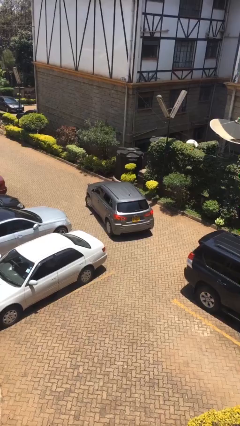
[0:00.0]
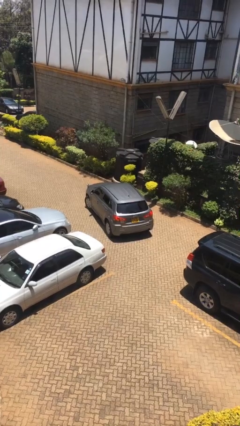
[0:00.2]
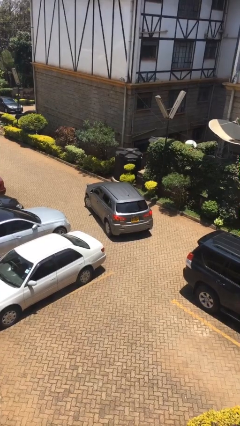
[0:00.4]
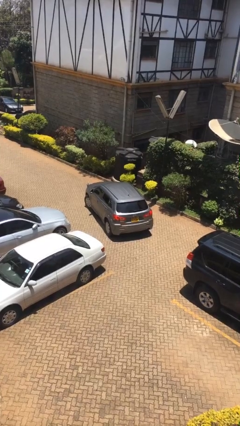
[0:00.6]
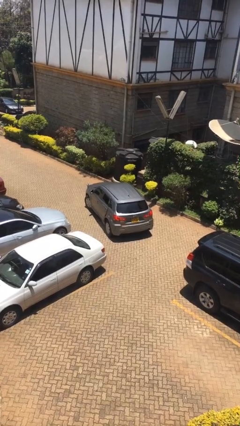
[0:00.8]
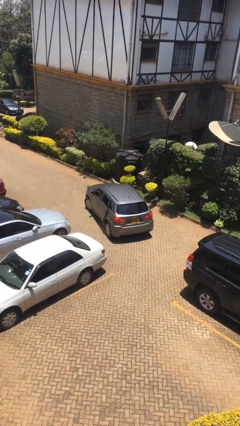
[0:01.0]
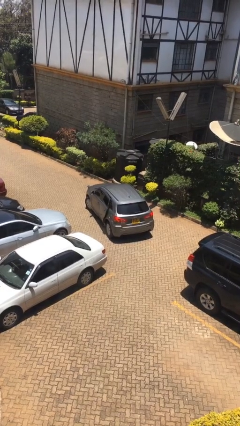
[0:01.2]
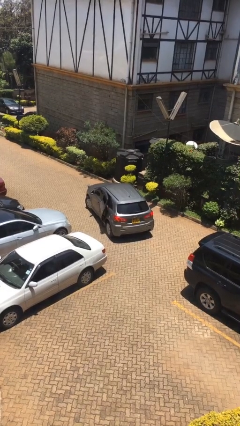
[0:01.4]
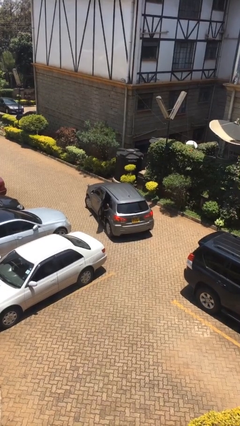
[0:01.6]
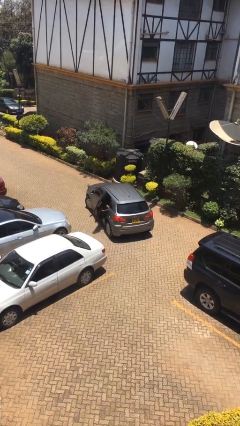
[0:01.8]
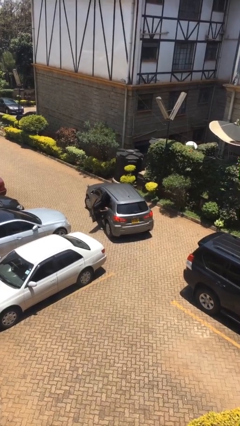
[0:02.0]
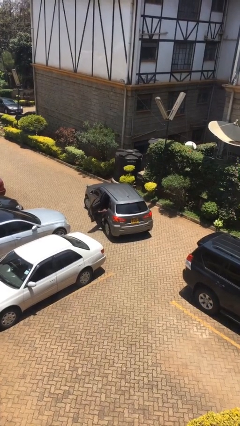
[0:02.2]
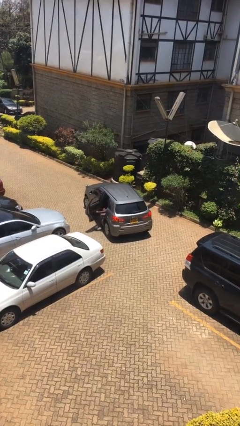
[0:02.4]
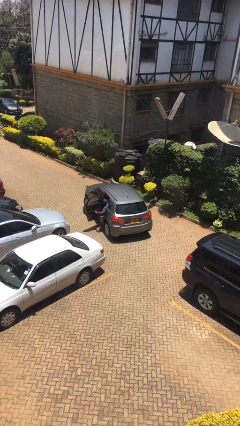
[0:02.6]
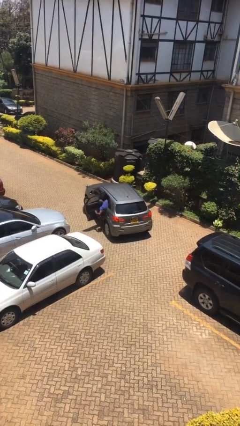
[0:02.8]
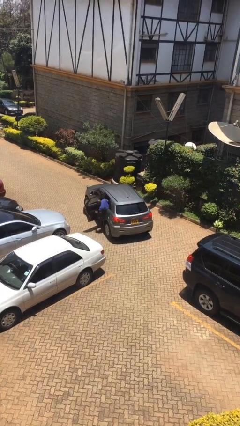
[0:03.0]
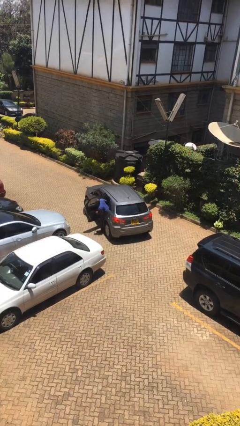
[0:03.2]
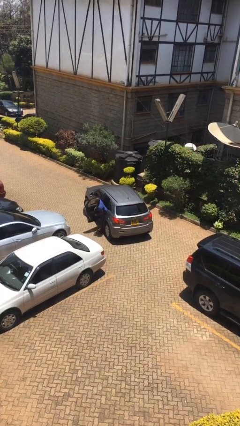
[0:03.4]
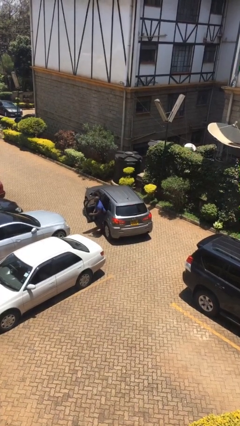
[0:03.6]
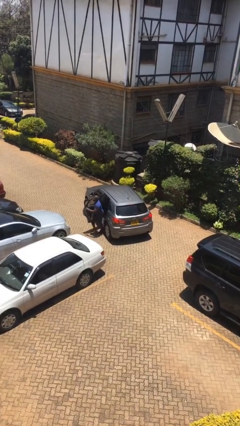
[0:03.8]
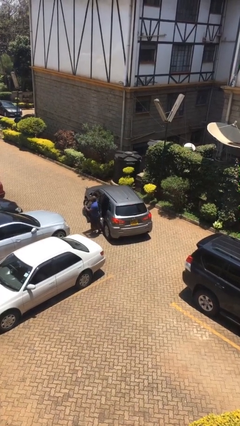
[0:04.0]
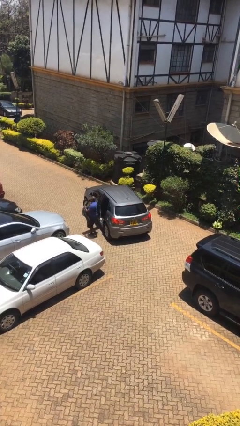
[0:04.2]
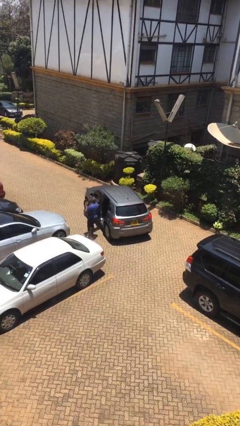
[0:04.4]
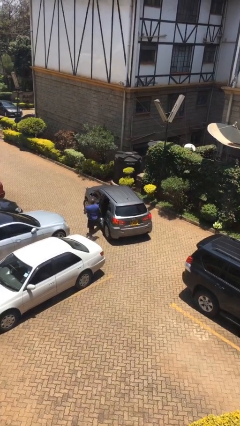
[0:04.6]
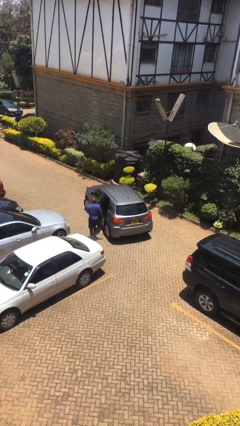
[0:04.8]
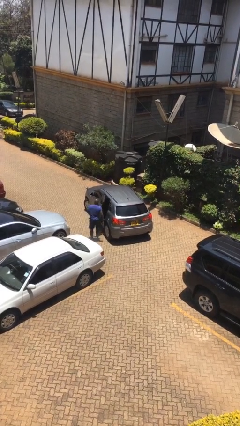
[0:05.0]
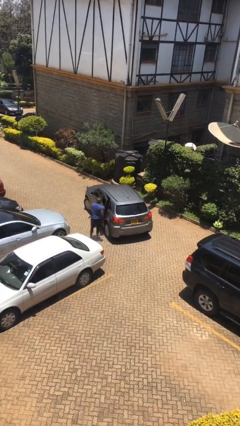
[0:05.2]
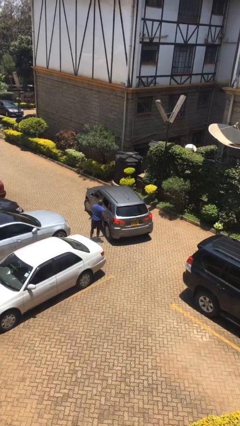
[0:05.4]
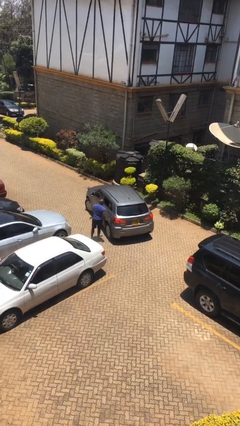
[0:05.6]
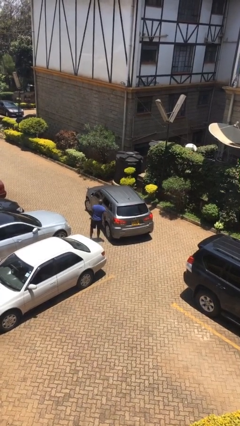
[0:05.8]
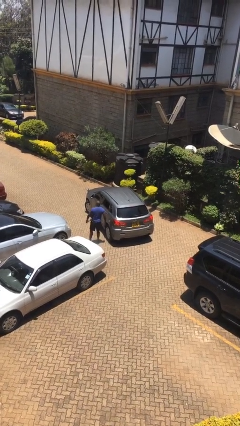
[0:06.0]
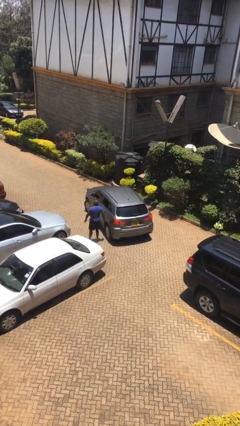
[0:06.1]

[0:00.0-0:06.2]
car drops off person

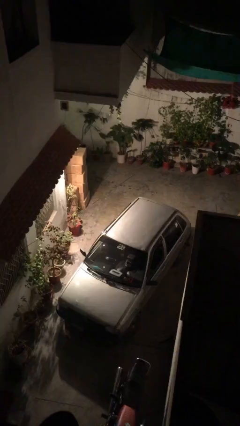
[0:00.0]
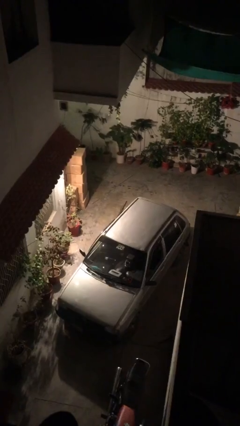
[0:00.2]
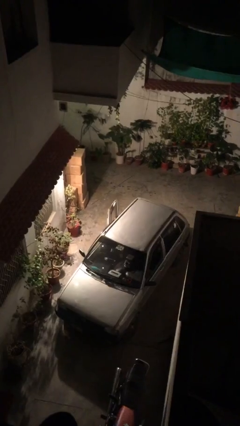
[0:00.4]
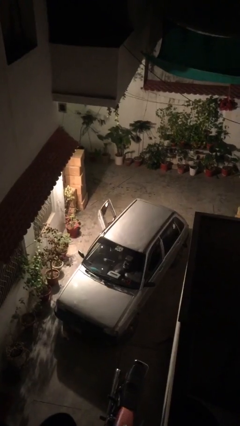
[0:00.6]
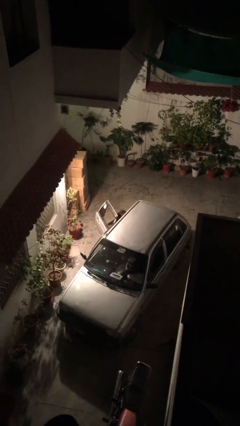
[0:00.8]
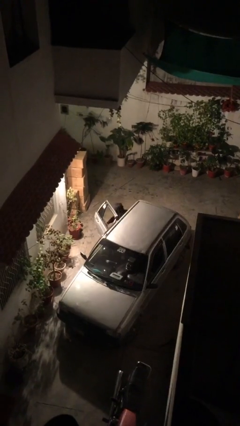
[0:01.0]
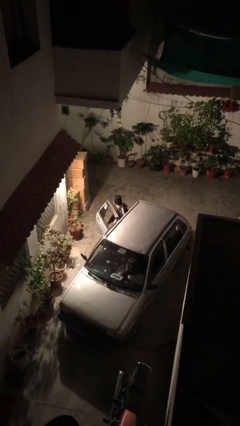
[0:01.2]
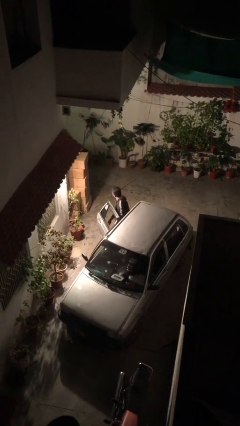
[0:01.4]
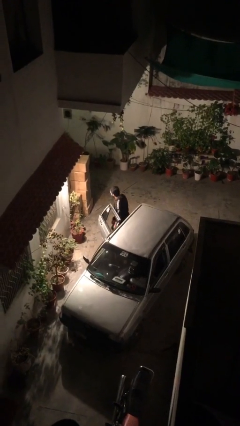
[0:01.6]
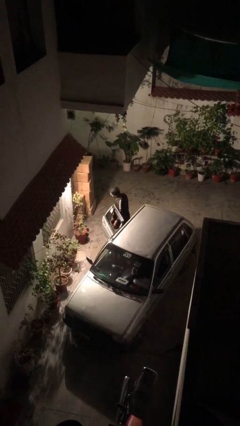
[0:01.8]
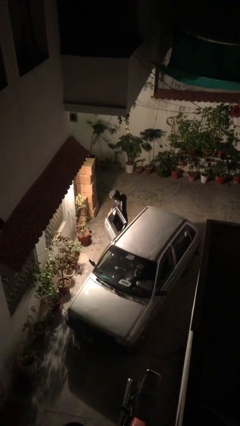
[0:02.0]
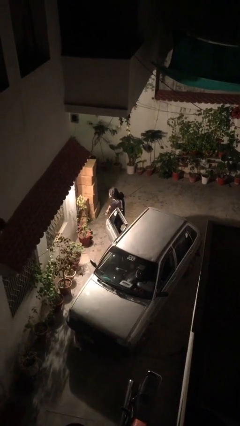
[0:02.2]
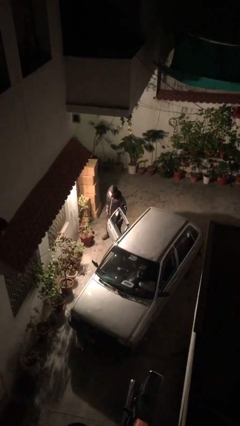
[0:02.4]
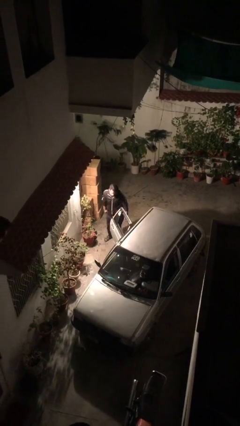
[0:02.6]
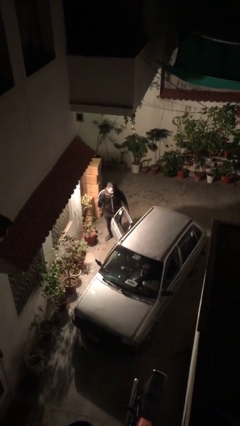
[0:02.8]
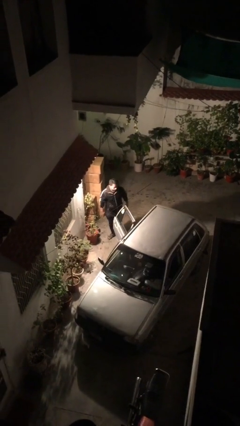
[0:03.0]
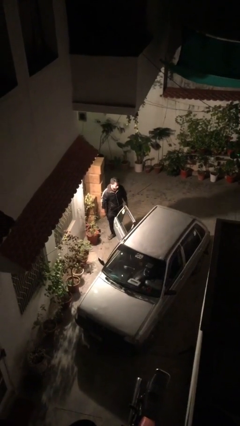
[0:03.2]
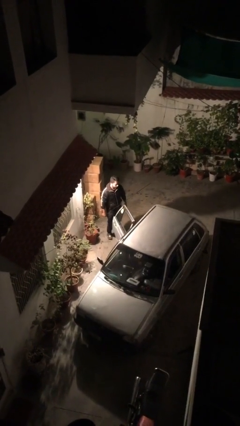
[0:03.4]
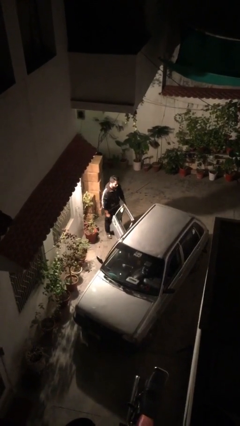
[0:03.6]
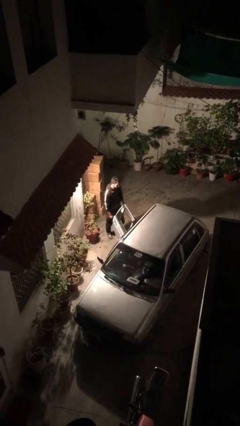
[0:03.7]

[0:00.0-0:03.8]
person exits car

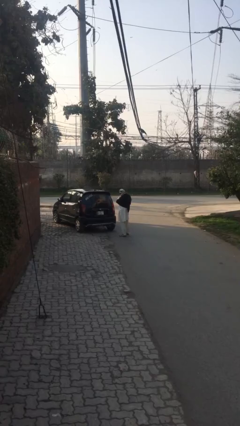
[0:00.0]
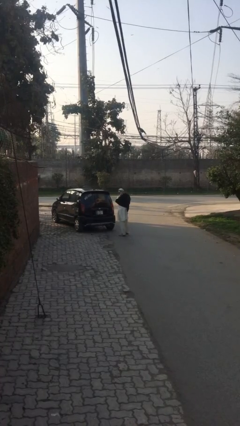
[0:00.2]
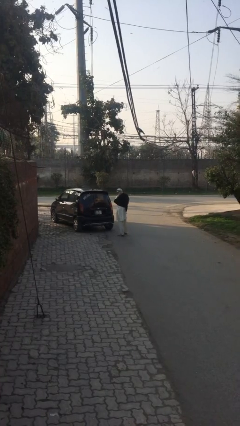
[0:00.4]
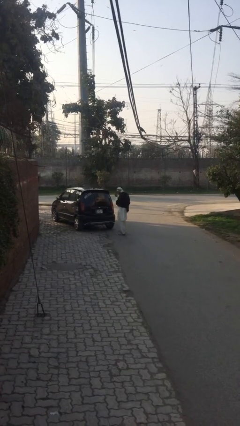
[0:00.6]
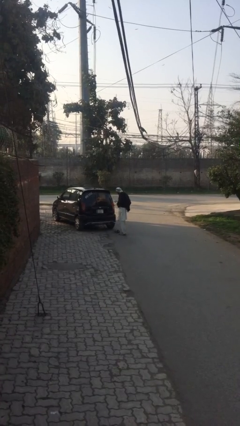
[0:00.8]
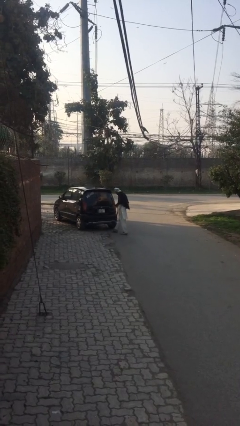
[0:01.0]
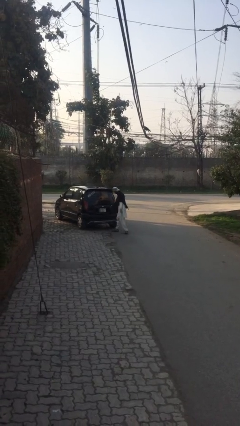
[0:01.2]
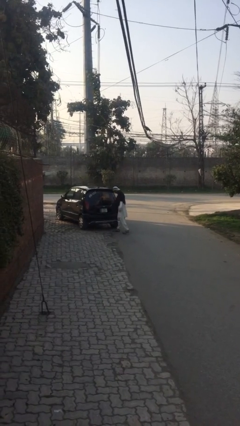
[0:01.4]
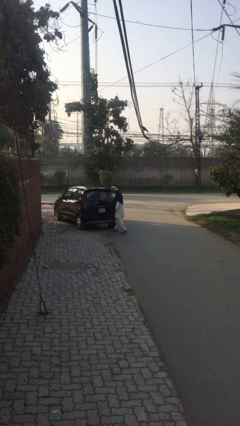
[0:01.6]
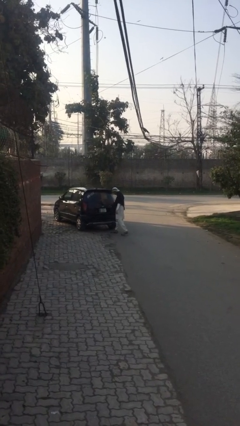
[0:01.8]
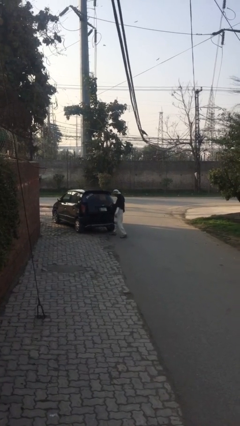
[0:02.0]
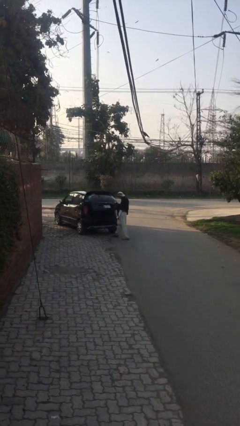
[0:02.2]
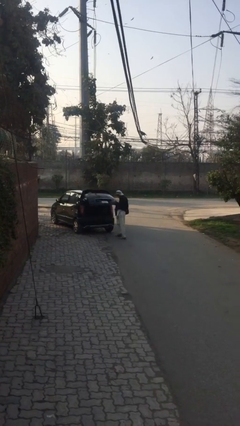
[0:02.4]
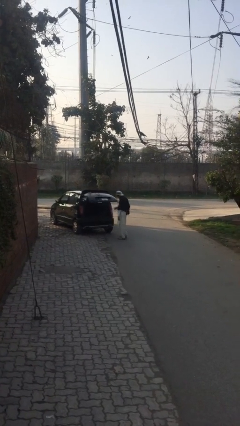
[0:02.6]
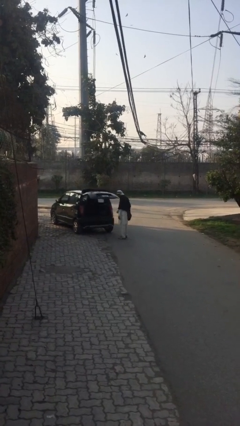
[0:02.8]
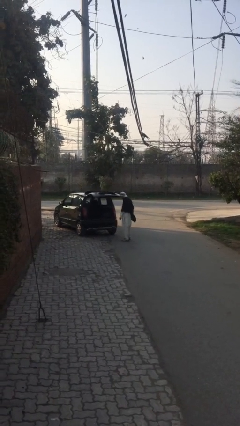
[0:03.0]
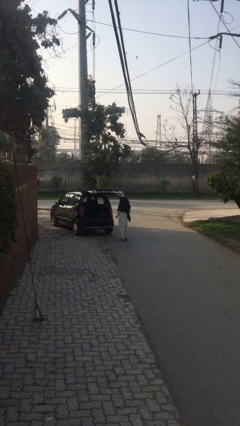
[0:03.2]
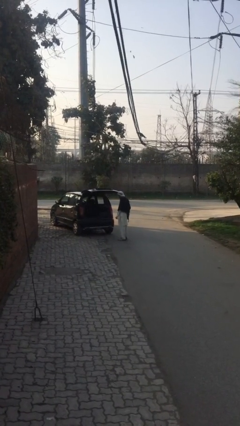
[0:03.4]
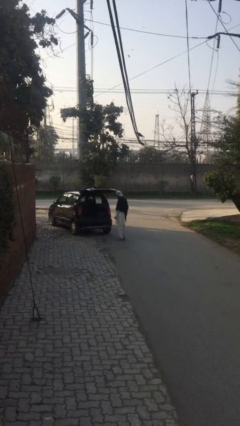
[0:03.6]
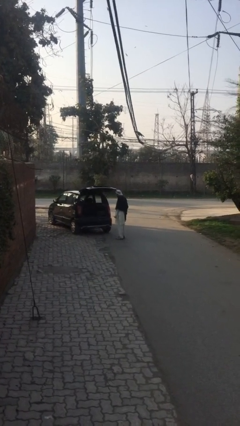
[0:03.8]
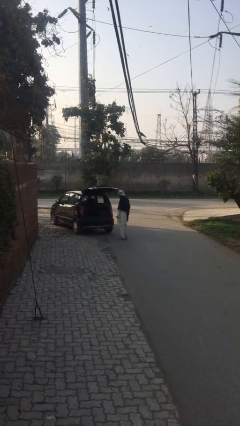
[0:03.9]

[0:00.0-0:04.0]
person opens car trunk

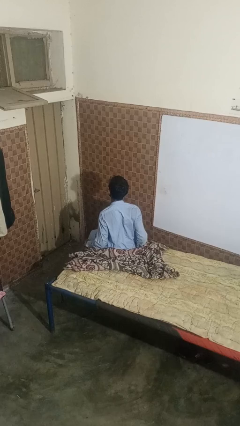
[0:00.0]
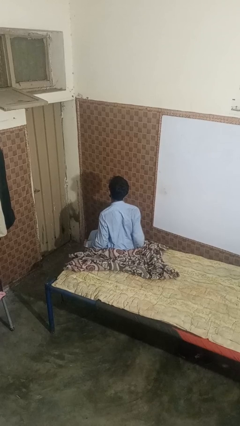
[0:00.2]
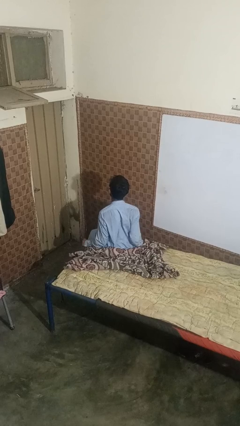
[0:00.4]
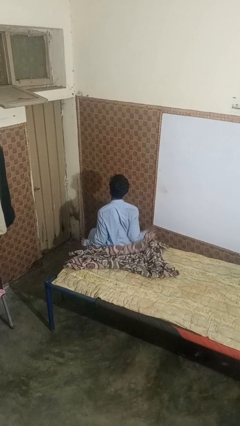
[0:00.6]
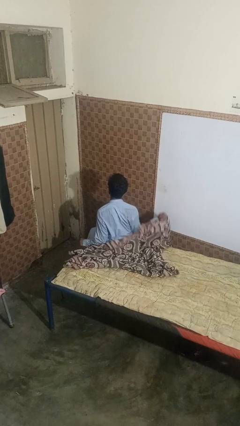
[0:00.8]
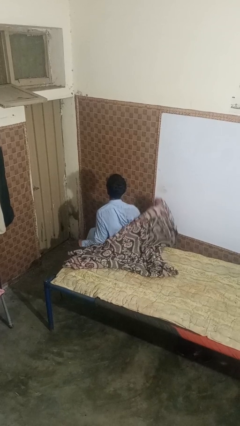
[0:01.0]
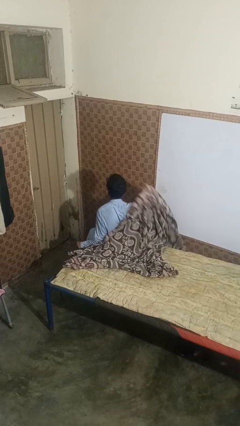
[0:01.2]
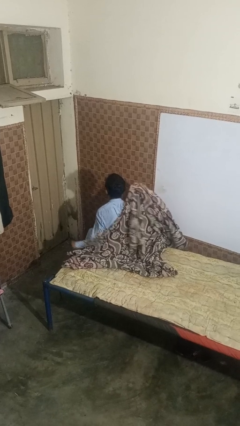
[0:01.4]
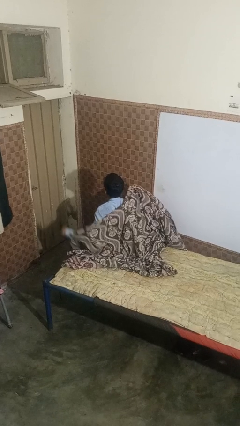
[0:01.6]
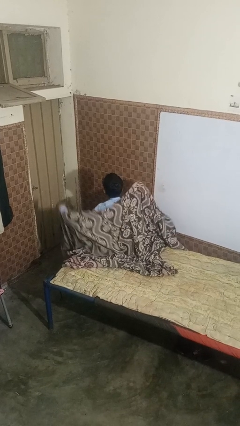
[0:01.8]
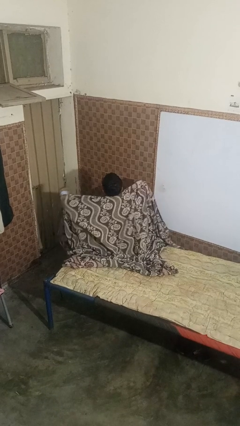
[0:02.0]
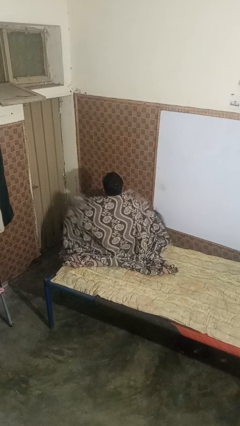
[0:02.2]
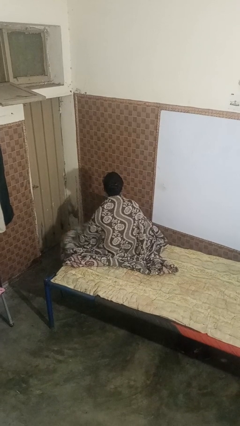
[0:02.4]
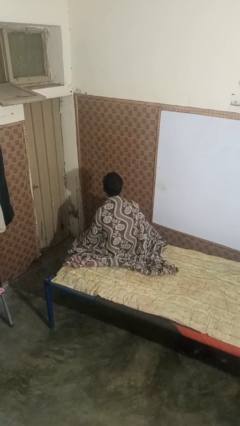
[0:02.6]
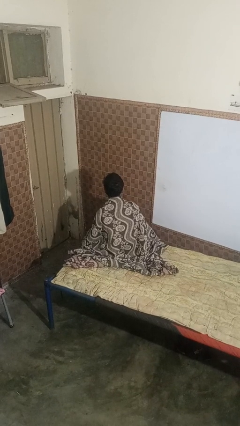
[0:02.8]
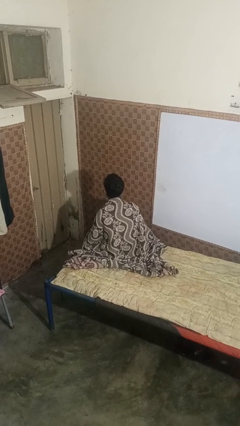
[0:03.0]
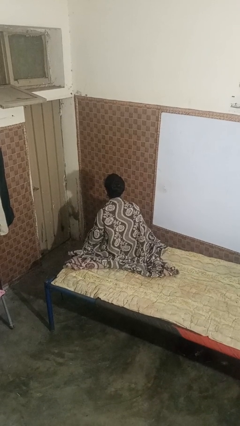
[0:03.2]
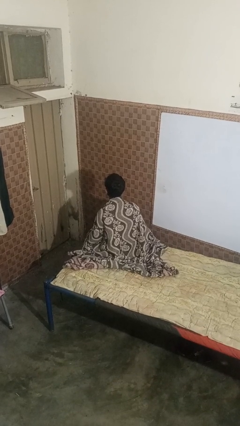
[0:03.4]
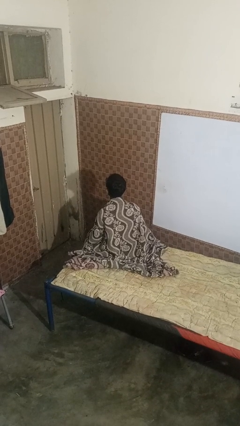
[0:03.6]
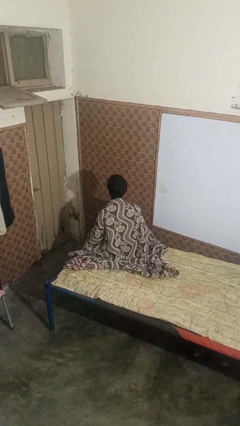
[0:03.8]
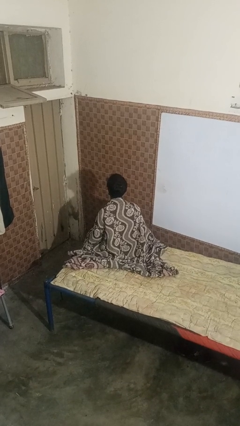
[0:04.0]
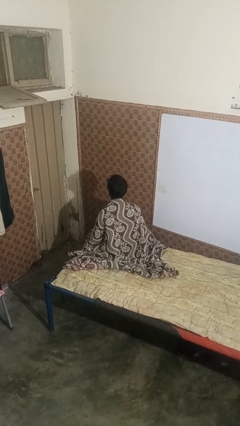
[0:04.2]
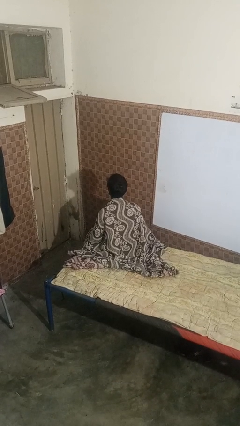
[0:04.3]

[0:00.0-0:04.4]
person covers with bedsheets
